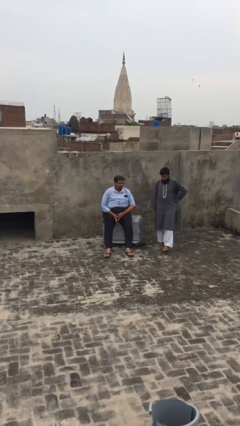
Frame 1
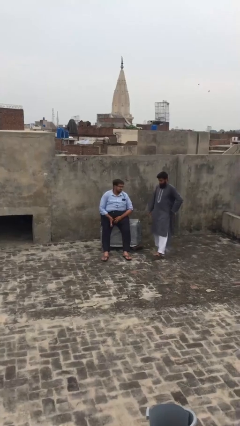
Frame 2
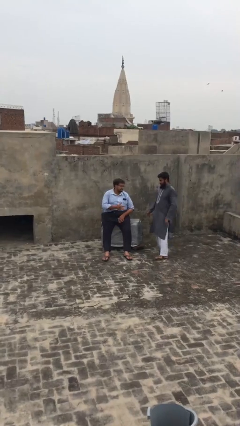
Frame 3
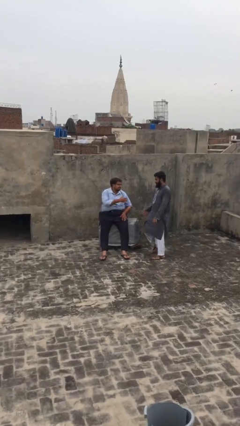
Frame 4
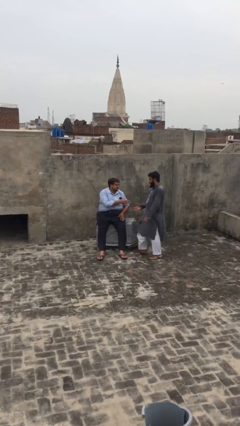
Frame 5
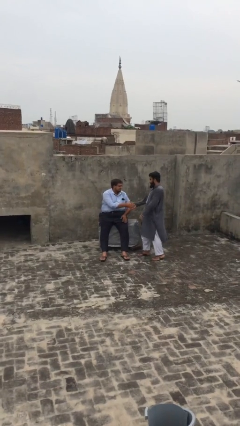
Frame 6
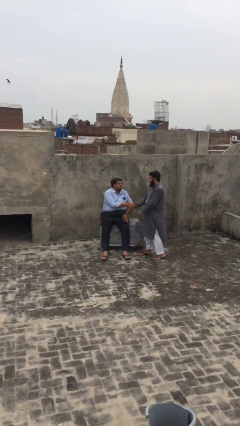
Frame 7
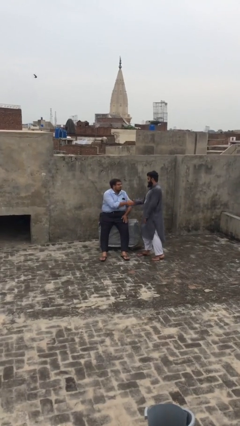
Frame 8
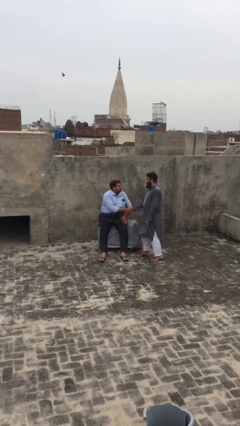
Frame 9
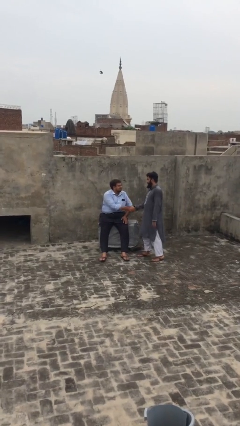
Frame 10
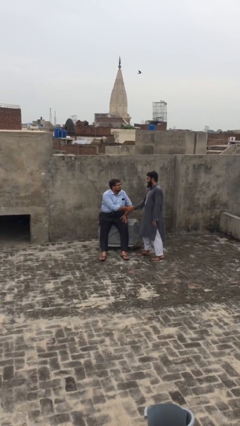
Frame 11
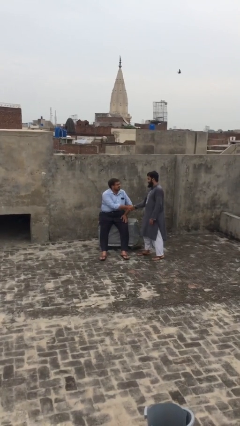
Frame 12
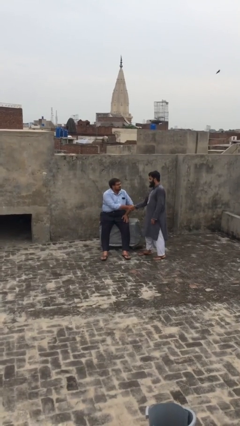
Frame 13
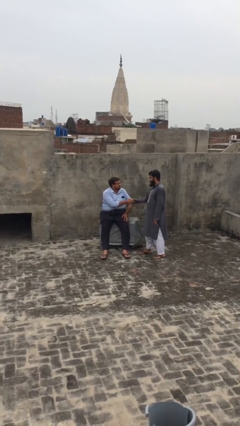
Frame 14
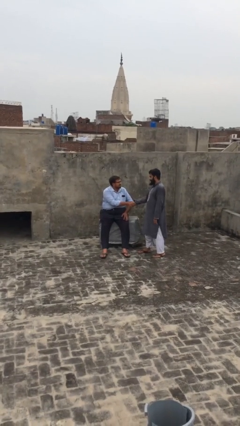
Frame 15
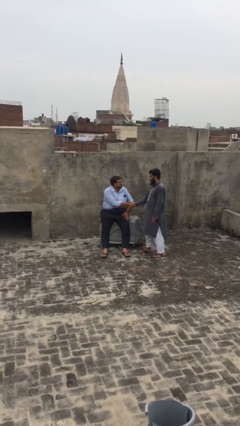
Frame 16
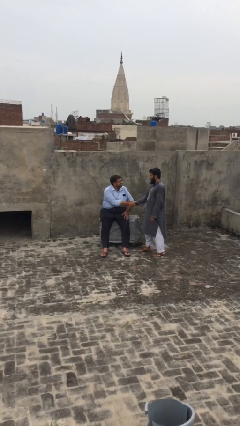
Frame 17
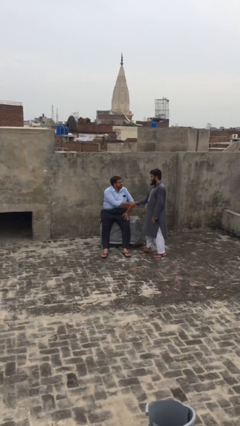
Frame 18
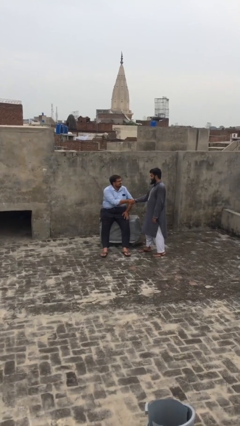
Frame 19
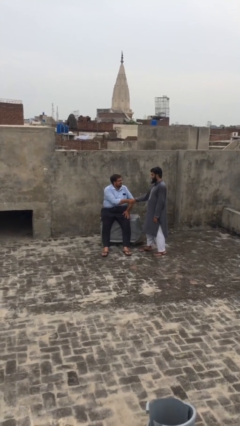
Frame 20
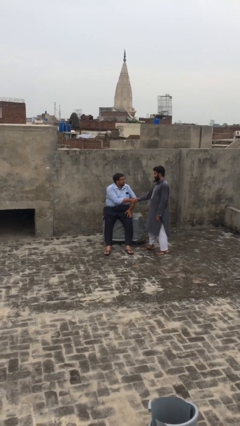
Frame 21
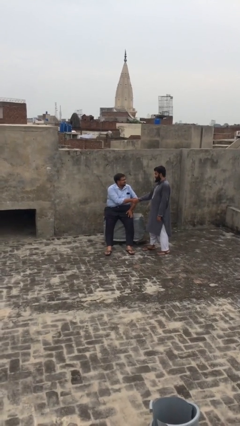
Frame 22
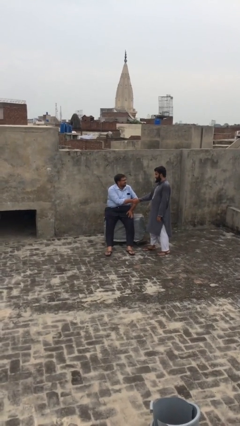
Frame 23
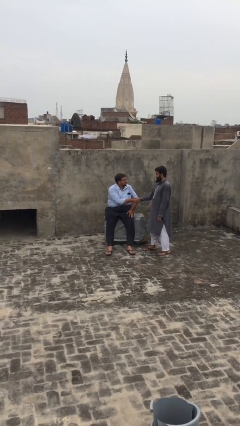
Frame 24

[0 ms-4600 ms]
person shakes hand

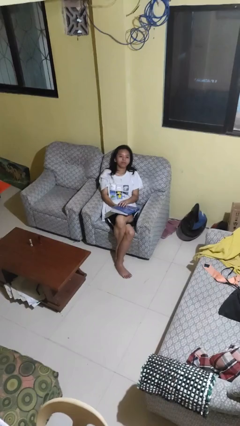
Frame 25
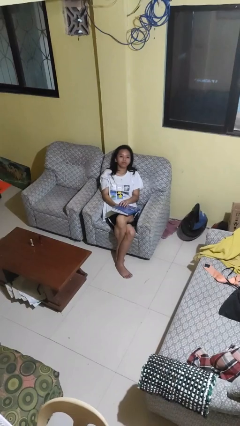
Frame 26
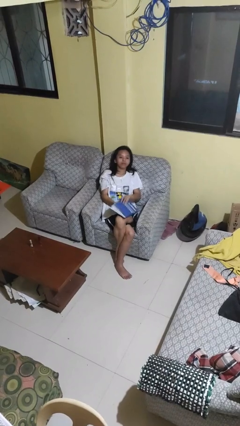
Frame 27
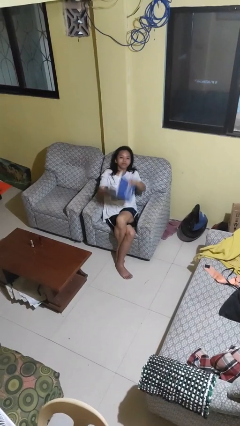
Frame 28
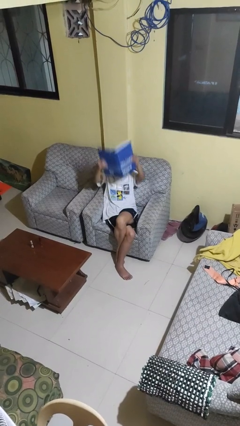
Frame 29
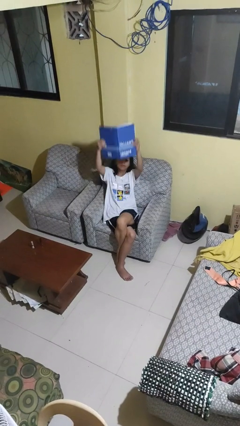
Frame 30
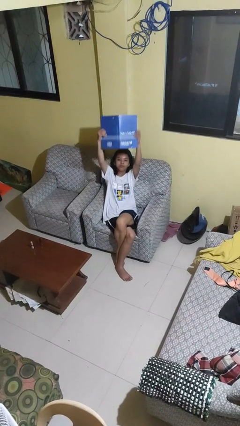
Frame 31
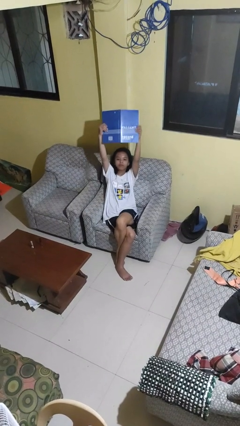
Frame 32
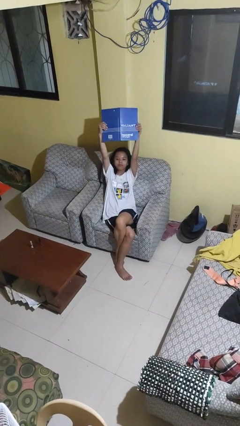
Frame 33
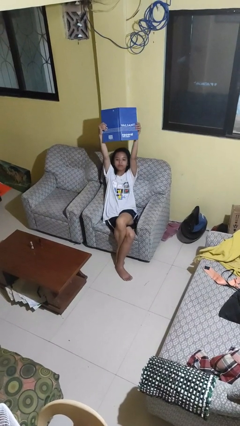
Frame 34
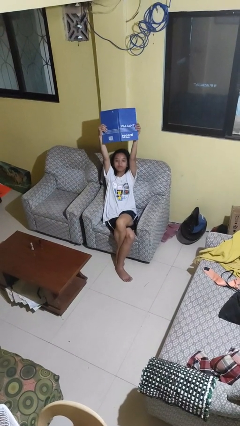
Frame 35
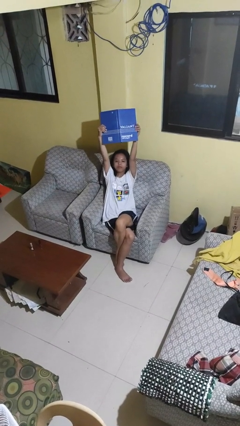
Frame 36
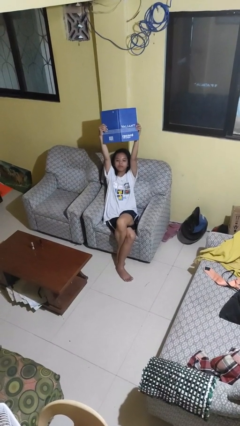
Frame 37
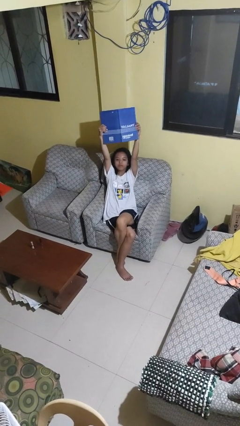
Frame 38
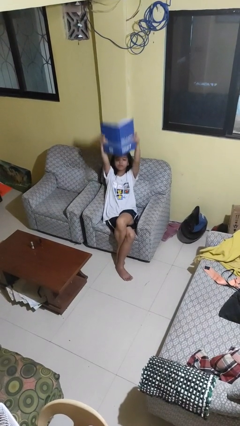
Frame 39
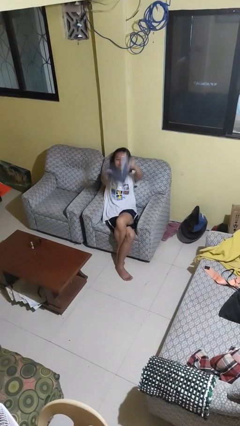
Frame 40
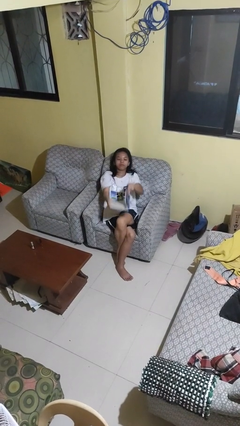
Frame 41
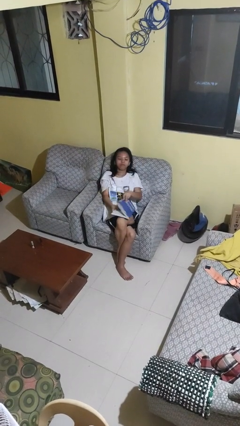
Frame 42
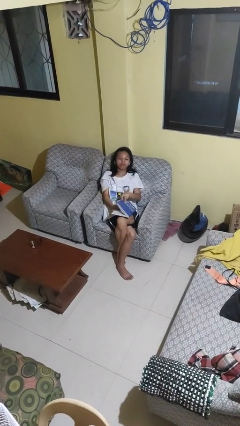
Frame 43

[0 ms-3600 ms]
person holds object above head

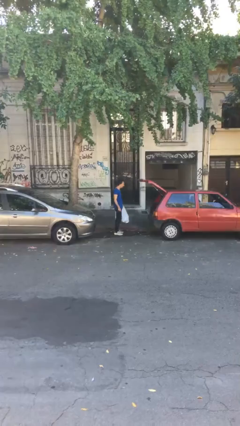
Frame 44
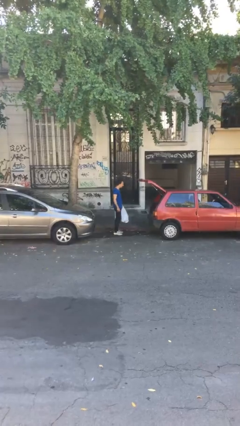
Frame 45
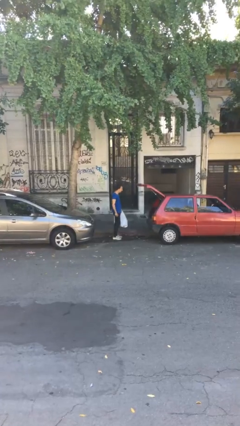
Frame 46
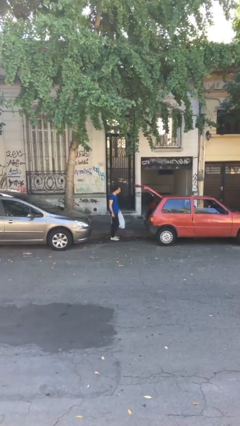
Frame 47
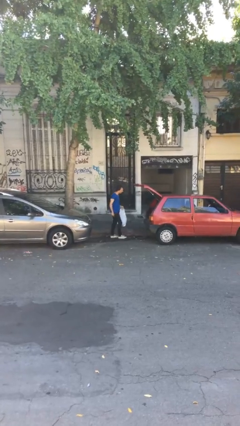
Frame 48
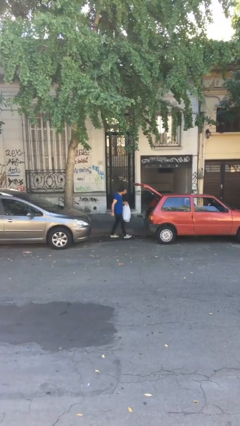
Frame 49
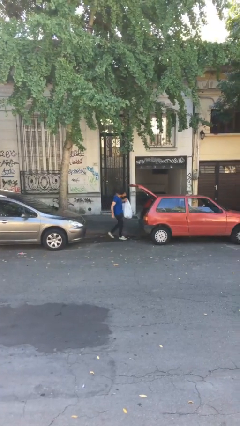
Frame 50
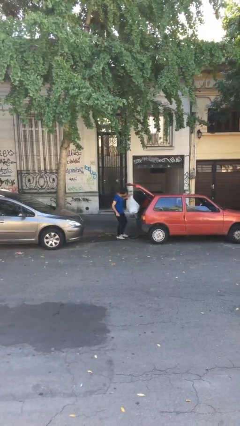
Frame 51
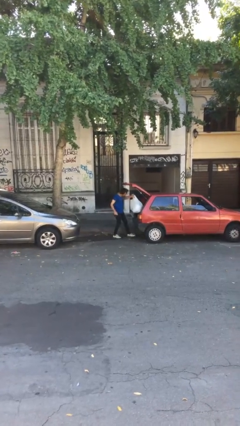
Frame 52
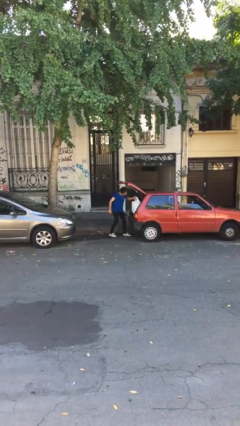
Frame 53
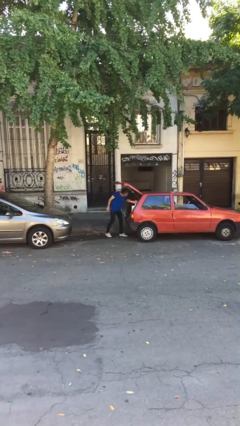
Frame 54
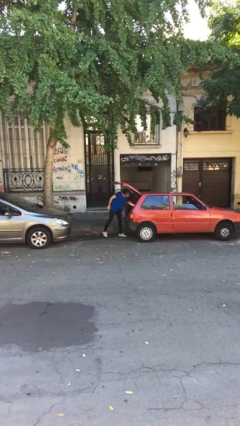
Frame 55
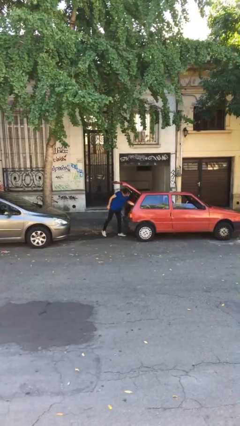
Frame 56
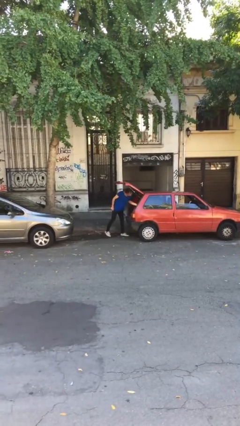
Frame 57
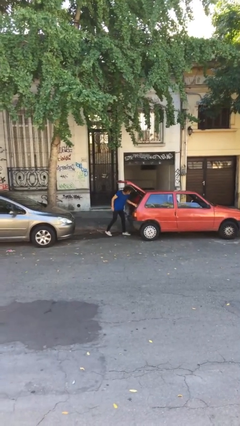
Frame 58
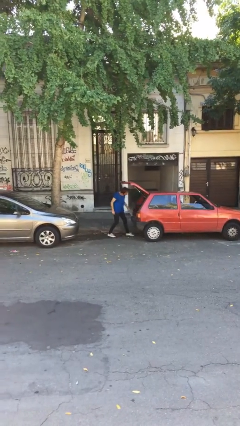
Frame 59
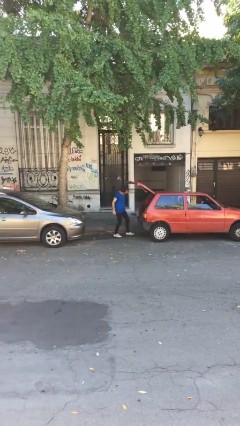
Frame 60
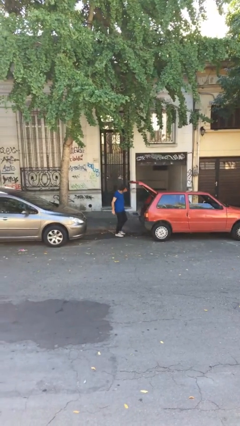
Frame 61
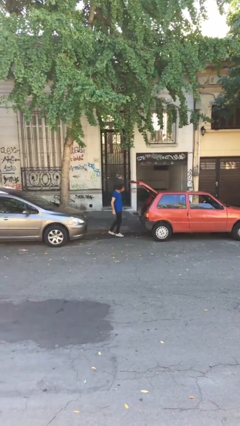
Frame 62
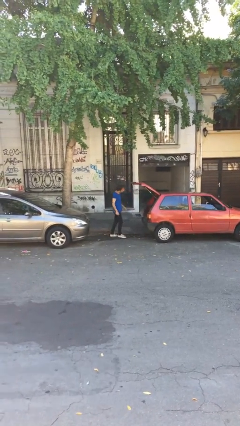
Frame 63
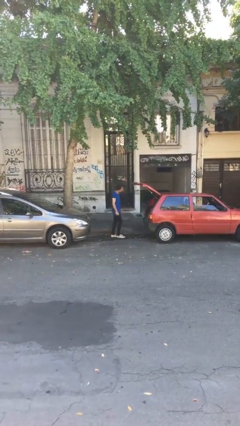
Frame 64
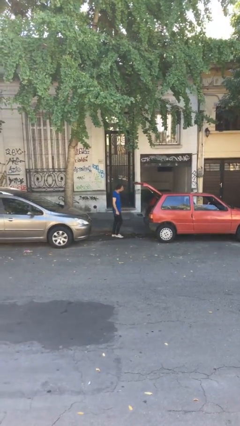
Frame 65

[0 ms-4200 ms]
person loads car

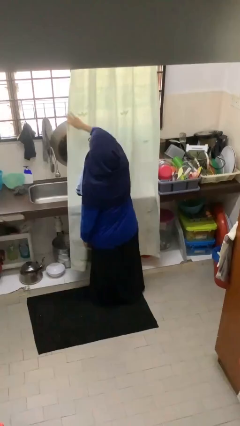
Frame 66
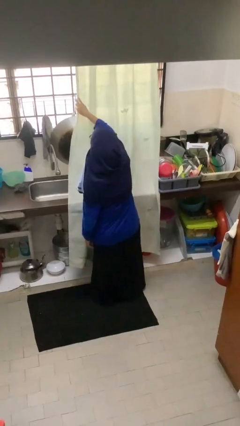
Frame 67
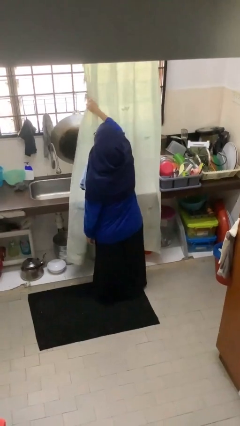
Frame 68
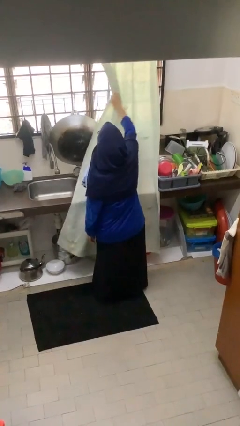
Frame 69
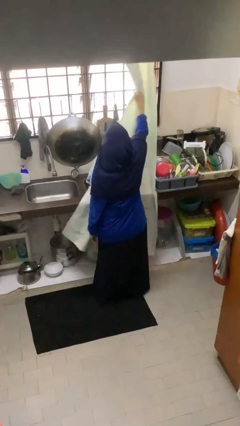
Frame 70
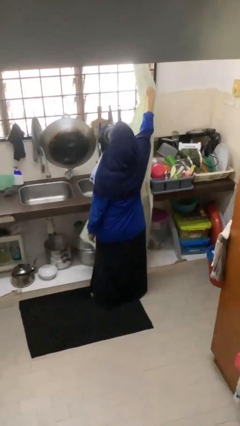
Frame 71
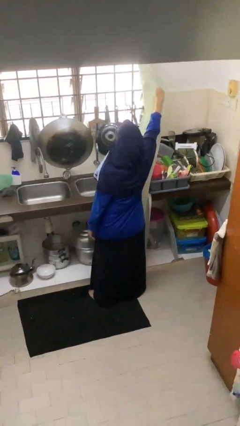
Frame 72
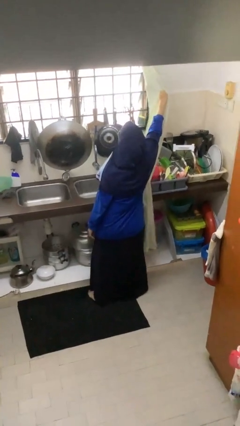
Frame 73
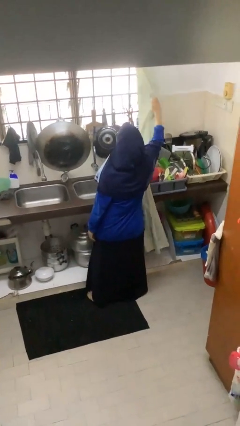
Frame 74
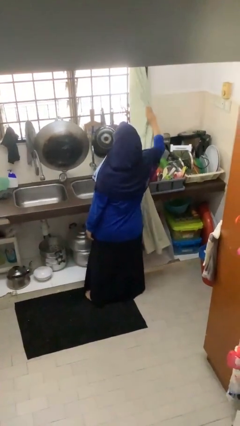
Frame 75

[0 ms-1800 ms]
person opens curtains

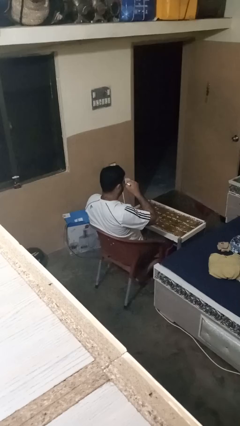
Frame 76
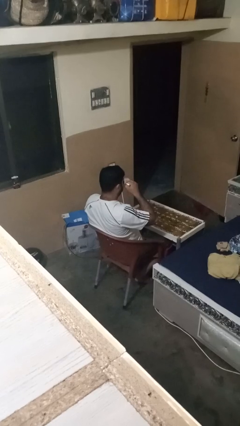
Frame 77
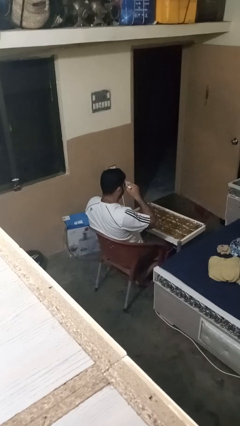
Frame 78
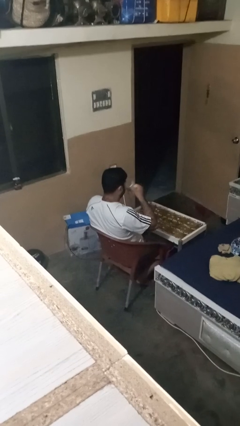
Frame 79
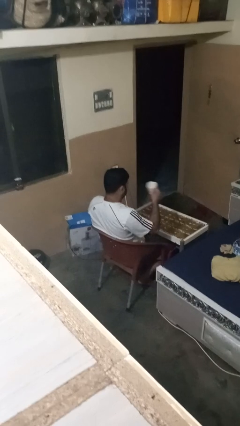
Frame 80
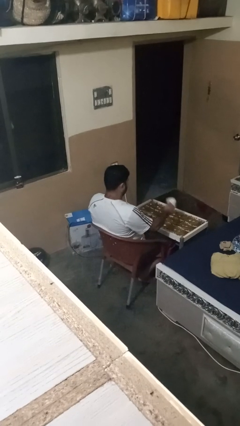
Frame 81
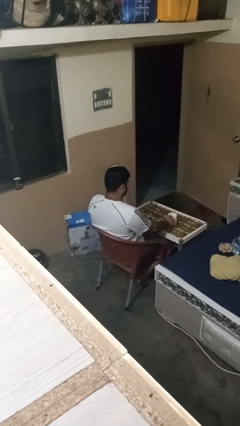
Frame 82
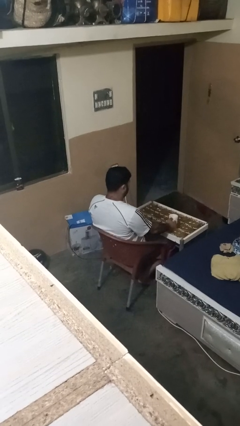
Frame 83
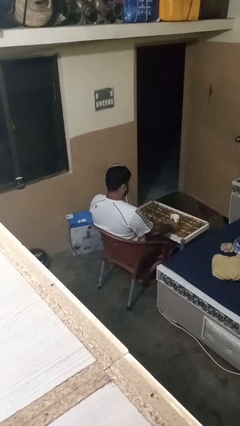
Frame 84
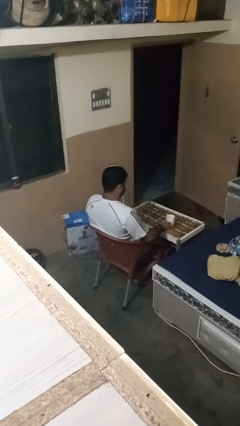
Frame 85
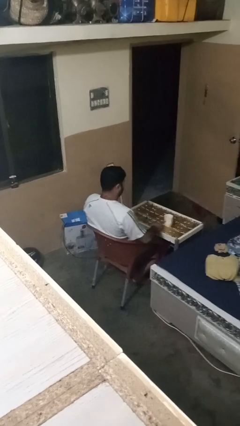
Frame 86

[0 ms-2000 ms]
person puts down object on table

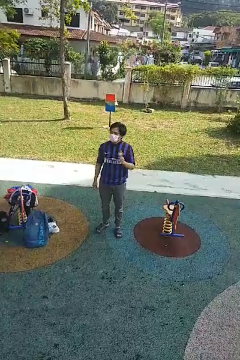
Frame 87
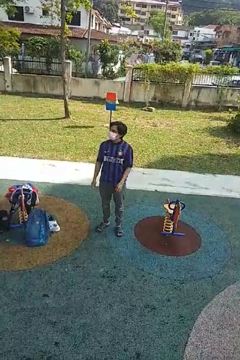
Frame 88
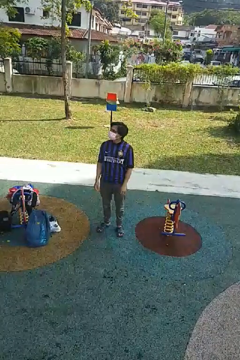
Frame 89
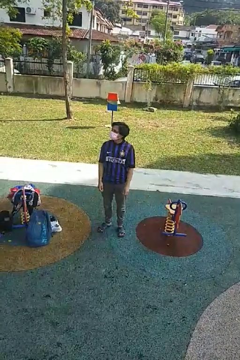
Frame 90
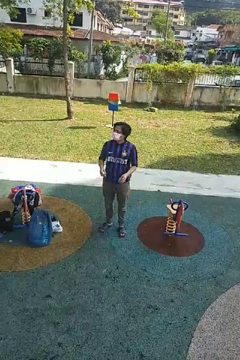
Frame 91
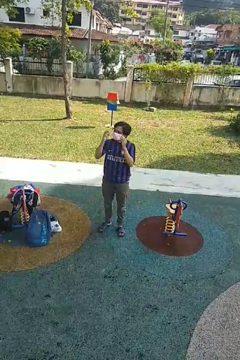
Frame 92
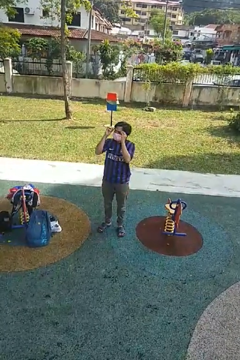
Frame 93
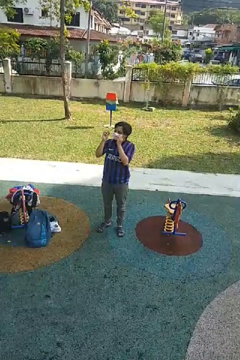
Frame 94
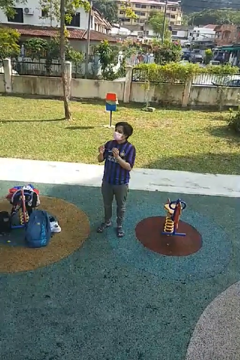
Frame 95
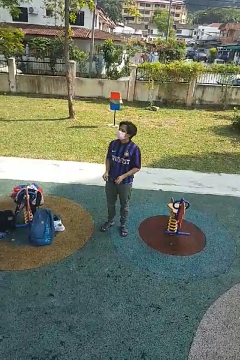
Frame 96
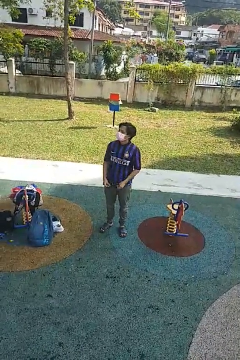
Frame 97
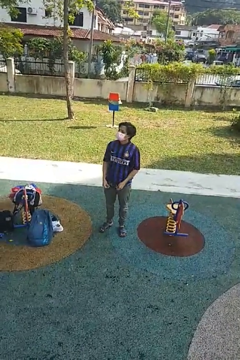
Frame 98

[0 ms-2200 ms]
person takes off glasses
